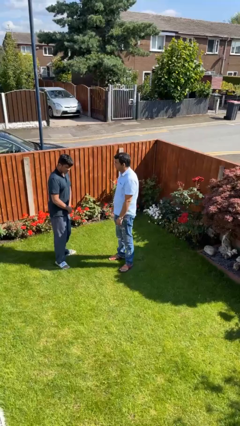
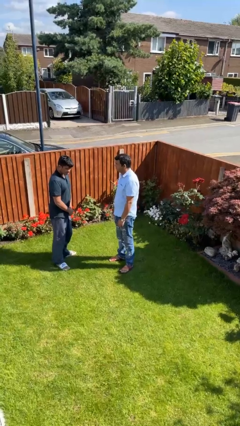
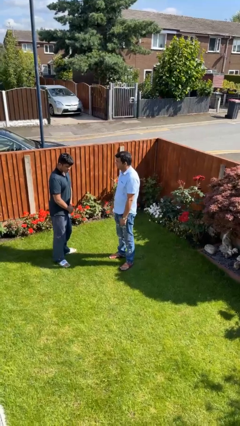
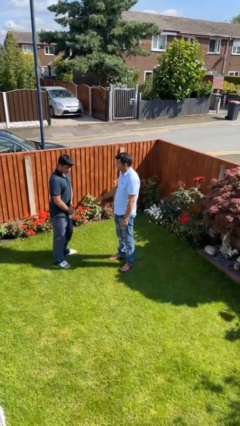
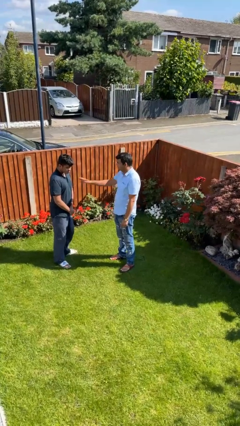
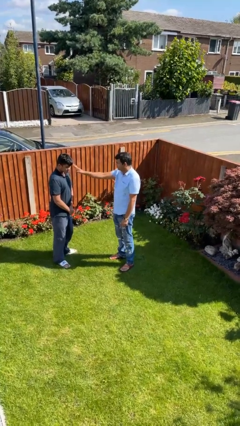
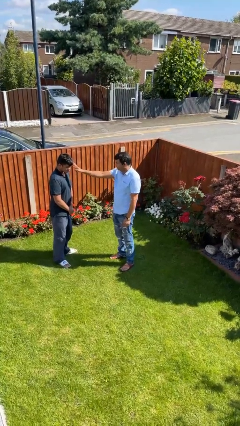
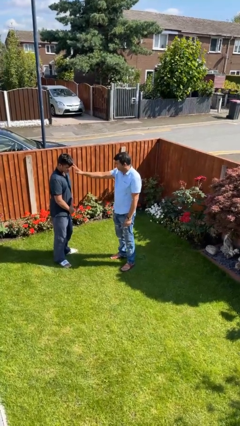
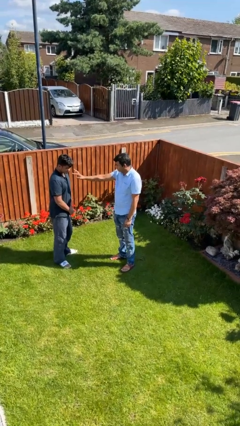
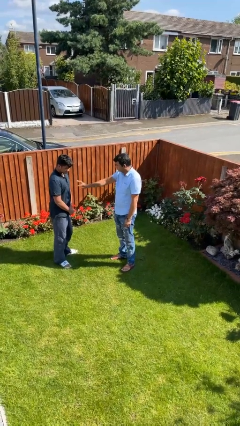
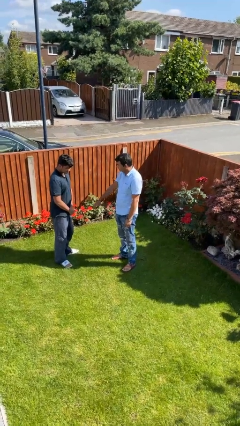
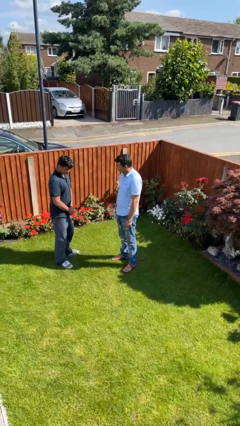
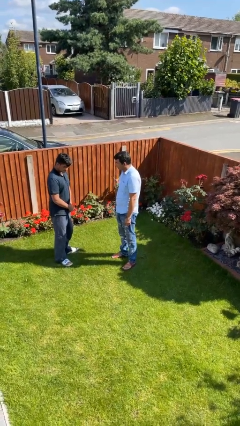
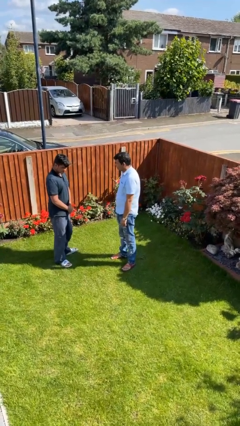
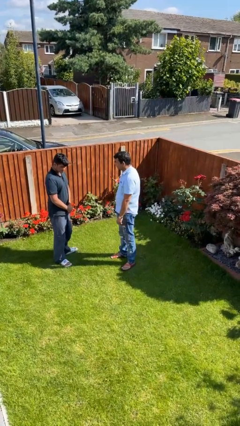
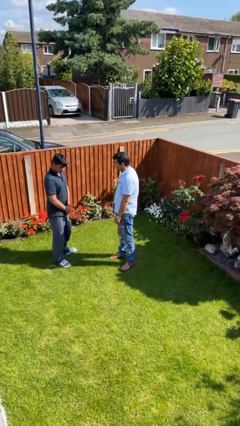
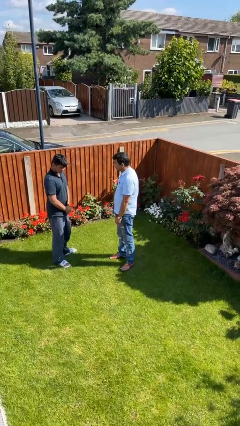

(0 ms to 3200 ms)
person touches face of person

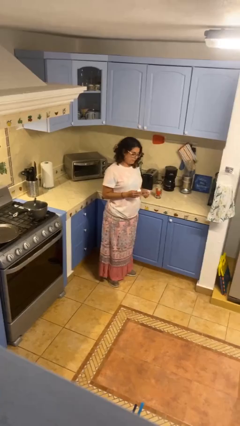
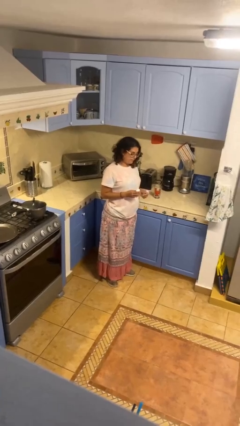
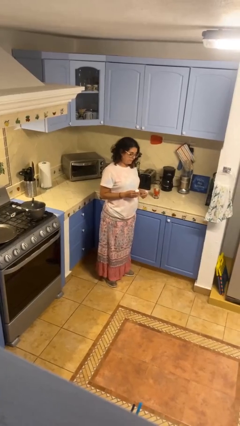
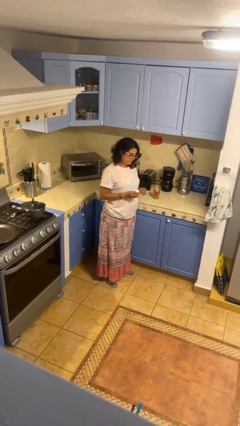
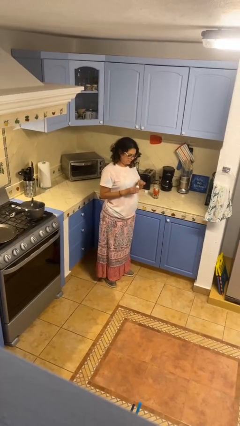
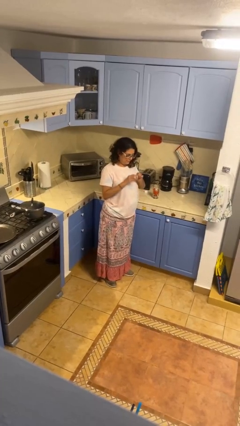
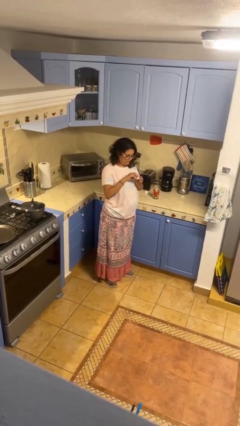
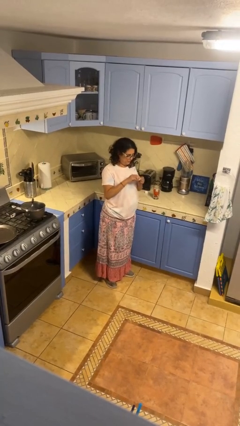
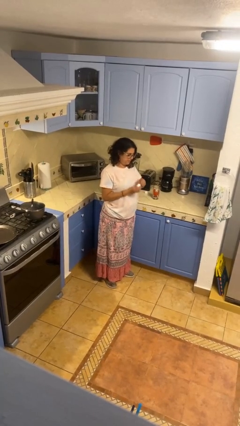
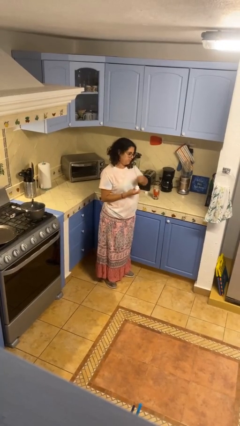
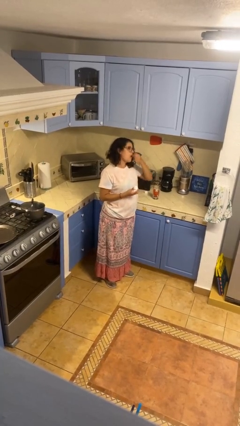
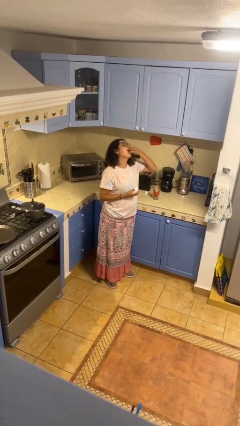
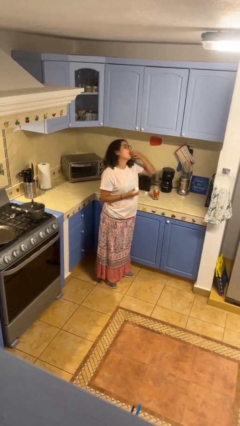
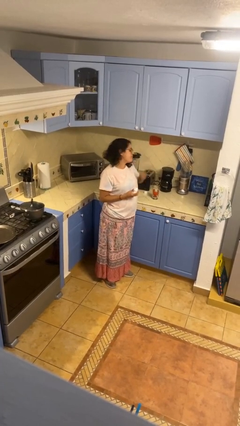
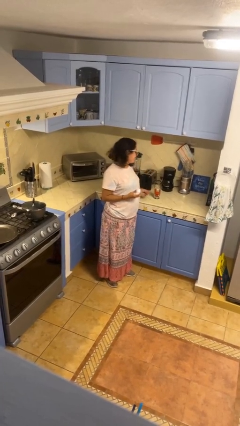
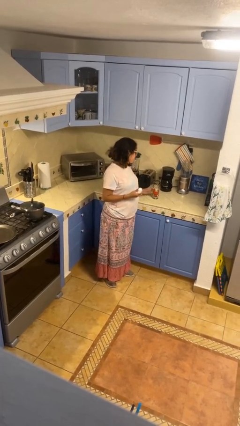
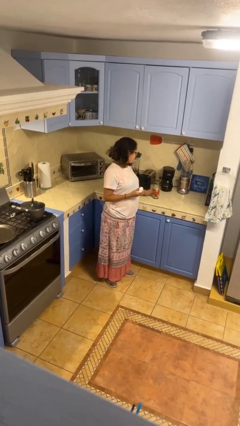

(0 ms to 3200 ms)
person takes medicine pills

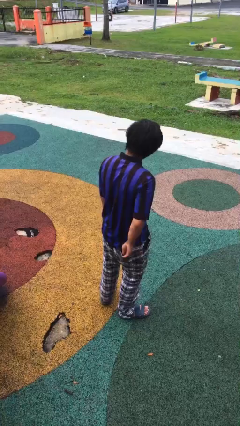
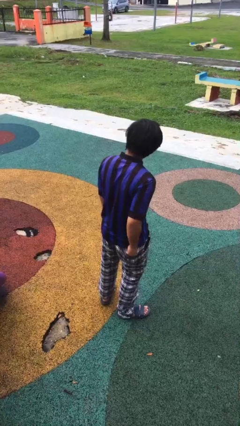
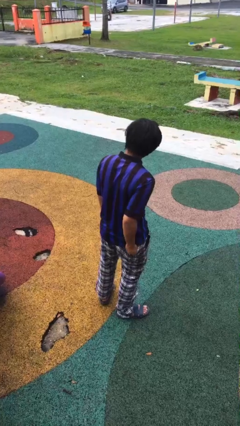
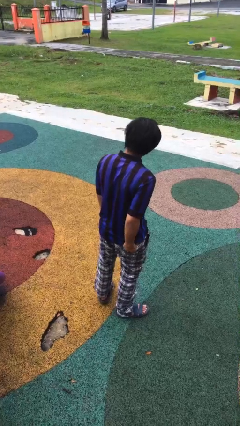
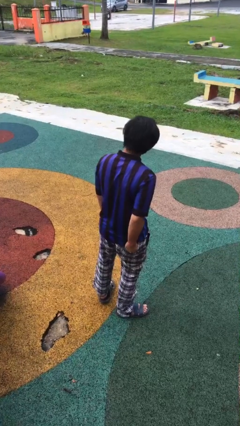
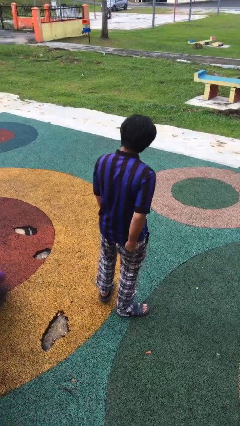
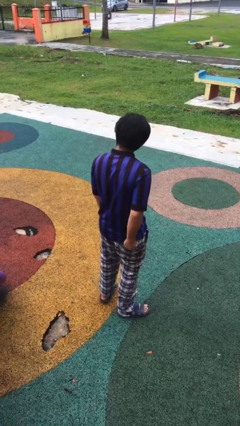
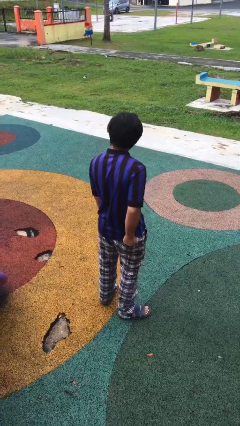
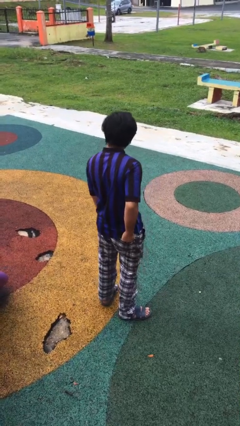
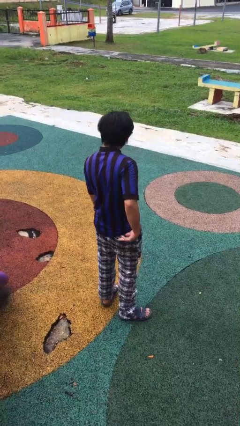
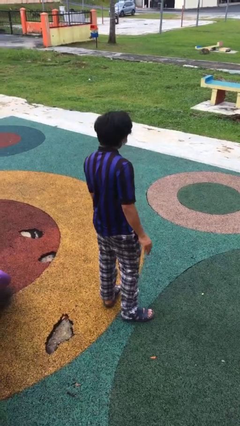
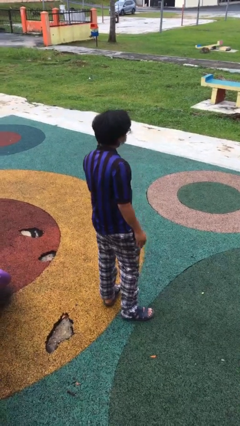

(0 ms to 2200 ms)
person puts hands in back pockets

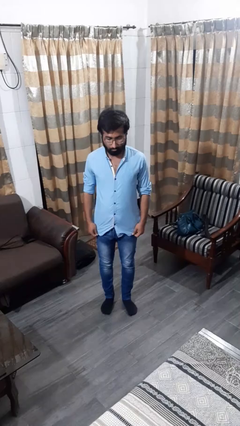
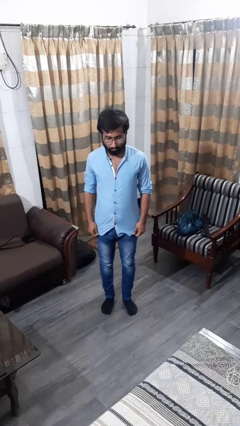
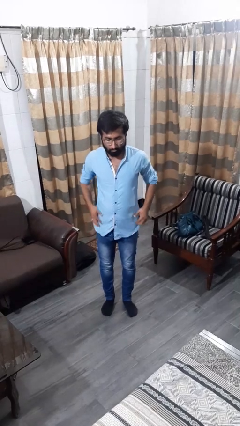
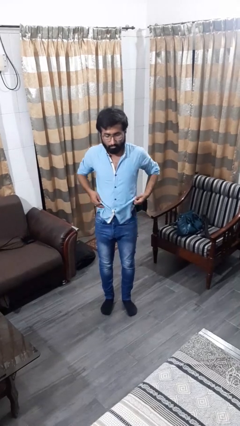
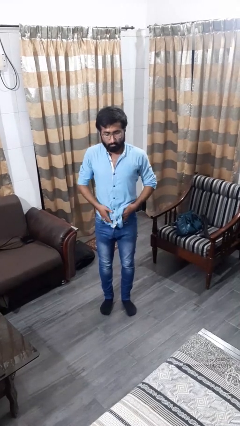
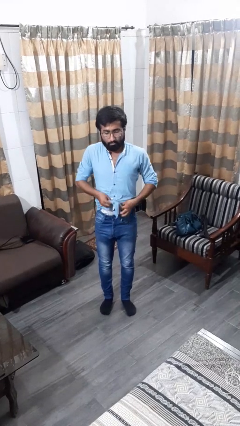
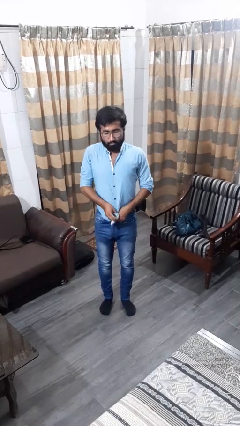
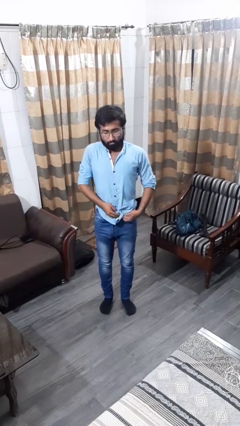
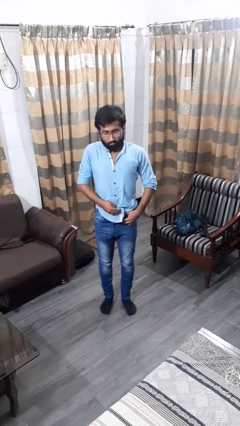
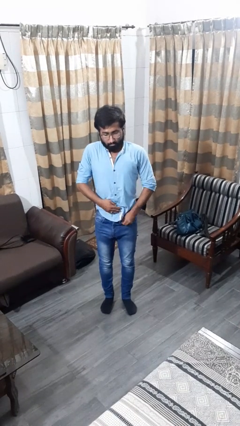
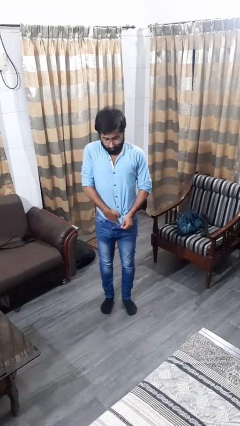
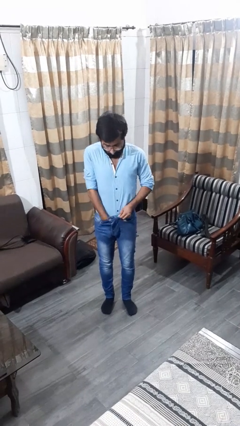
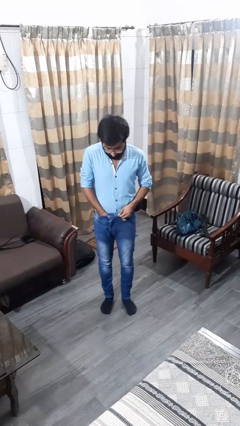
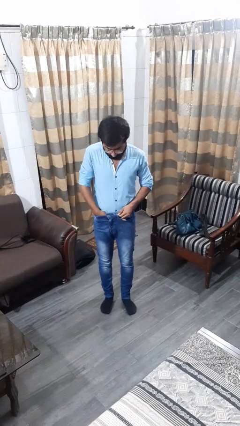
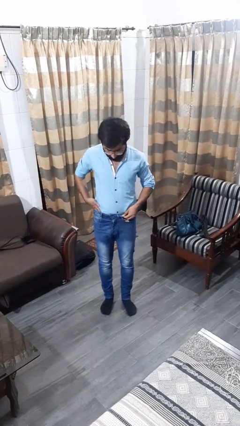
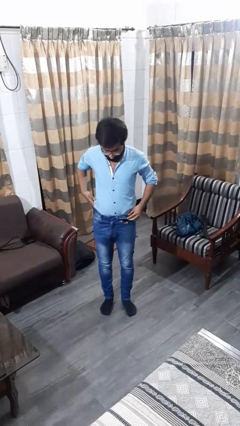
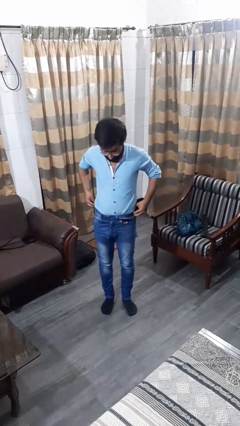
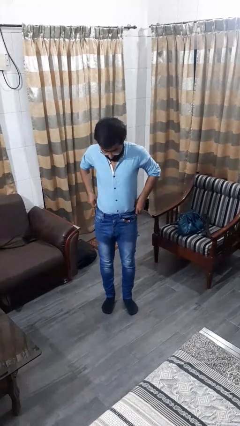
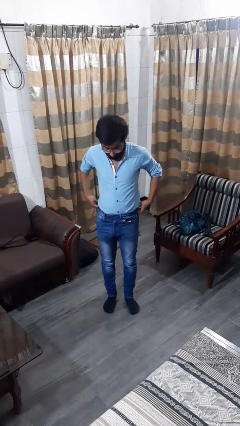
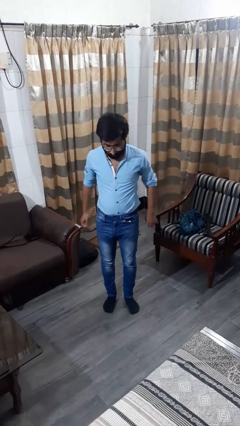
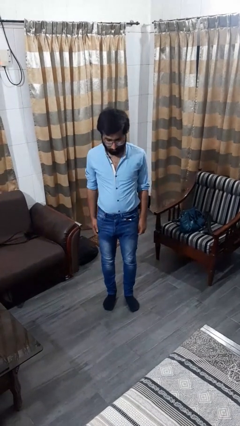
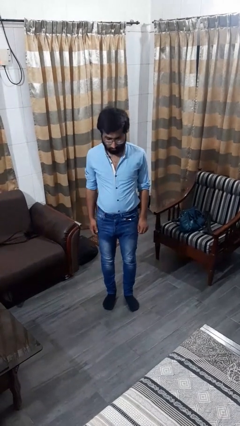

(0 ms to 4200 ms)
person tucks in shirt

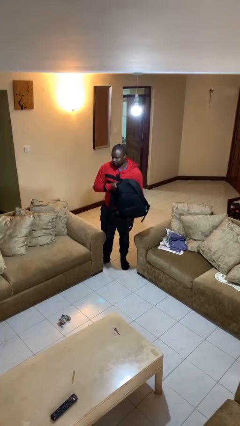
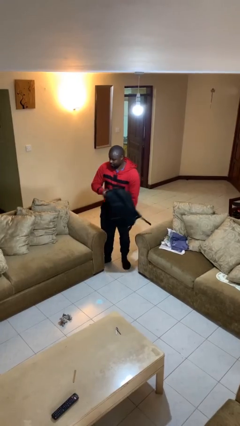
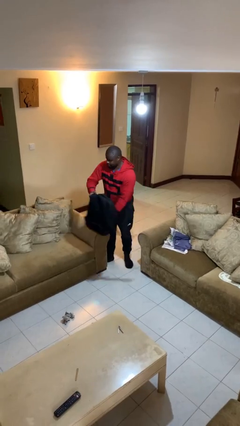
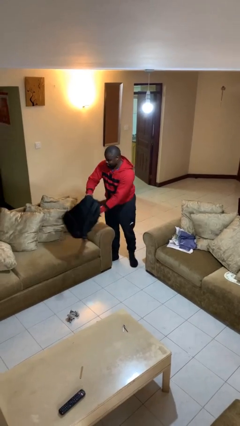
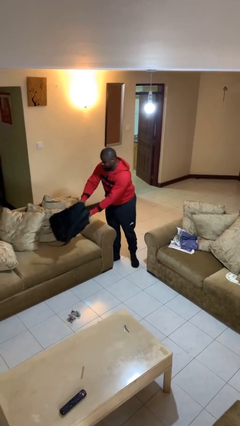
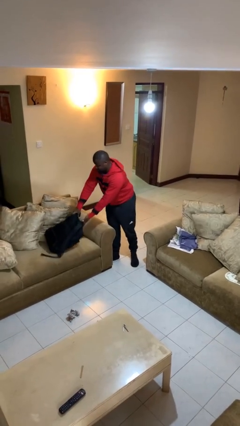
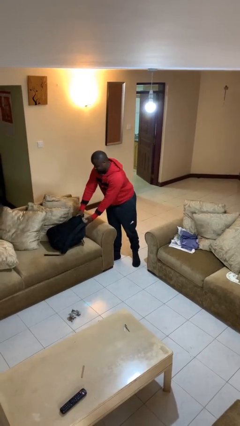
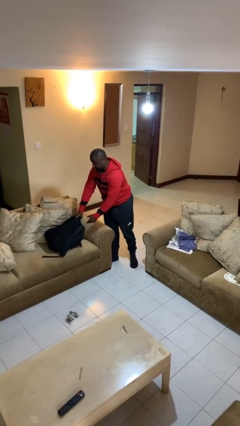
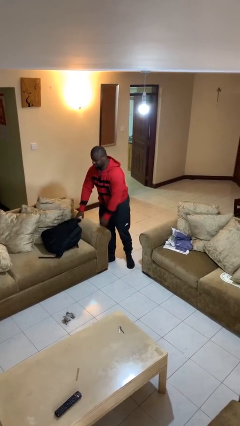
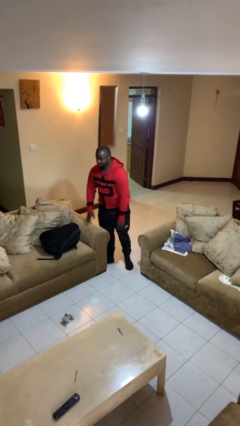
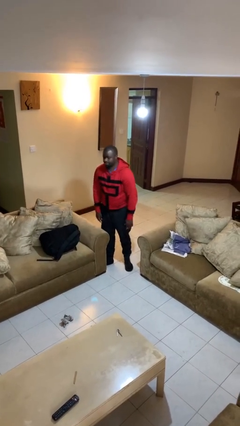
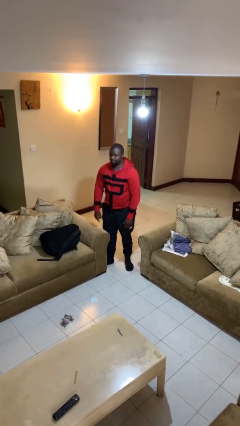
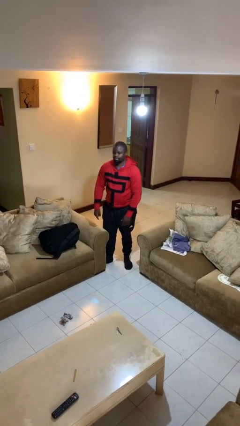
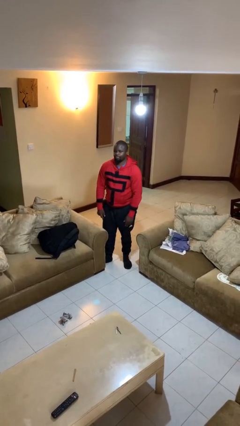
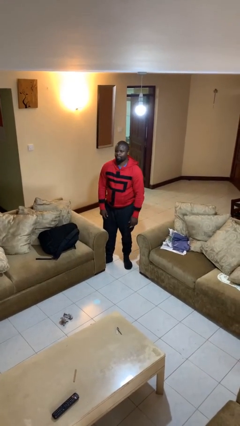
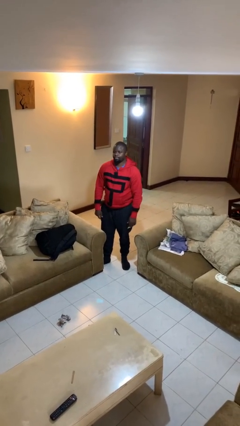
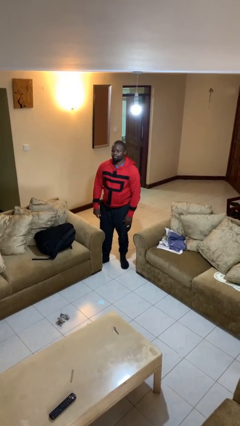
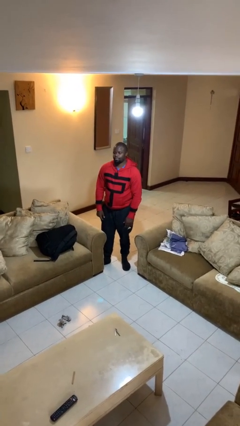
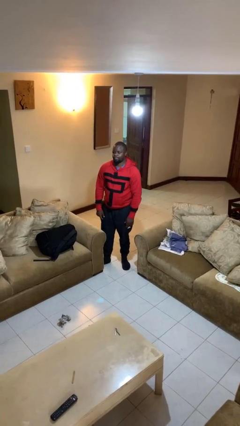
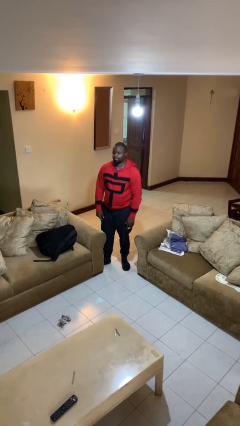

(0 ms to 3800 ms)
person puts down object on couch

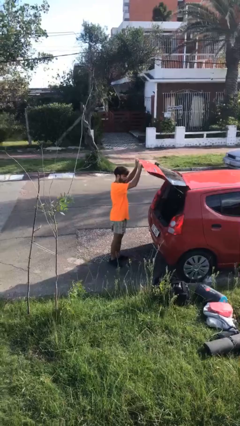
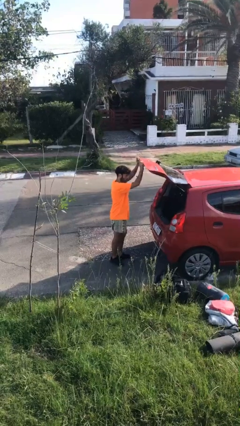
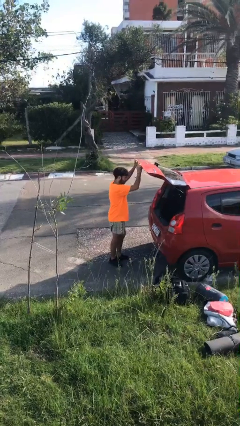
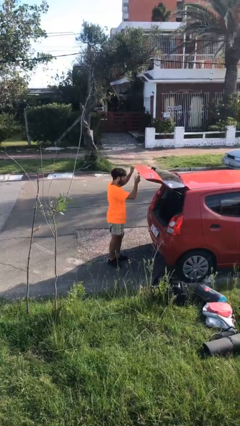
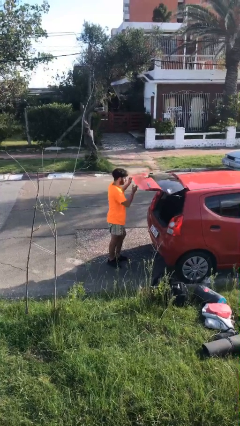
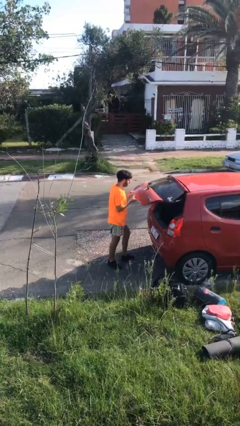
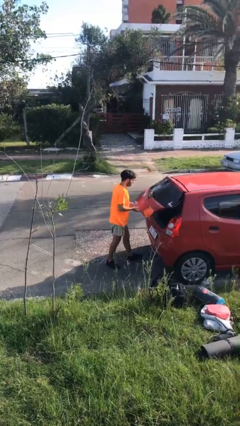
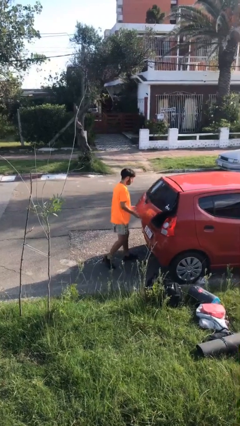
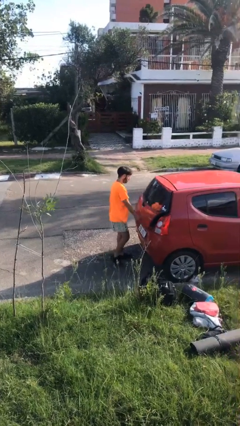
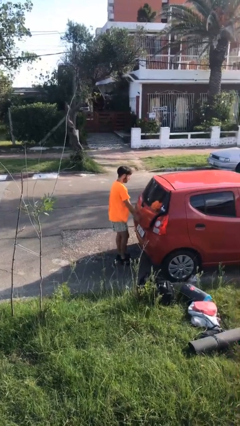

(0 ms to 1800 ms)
person closes car trunk
